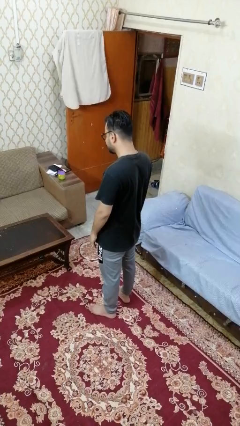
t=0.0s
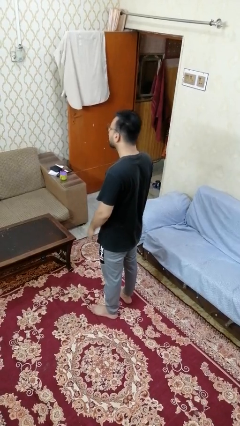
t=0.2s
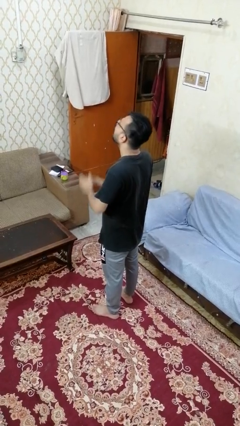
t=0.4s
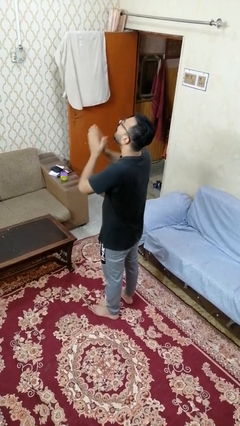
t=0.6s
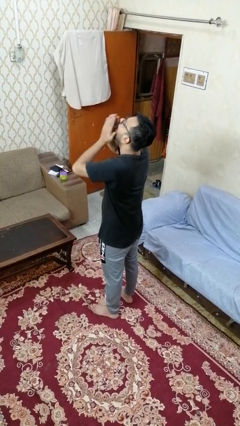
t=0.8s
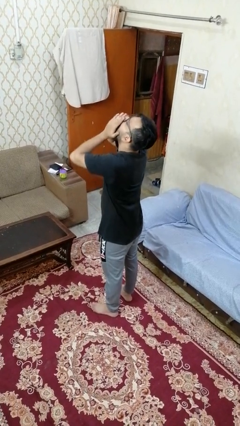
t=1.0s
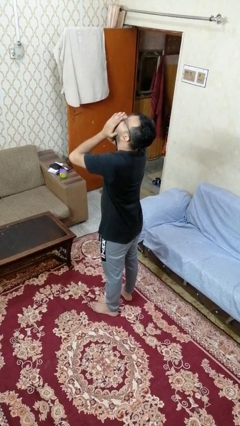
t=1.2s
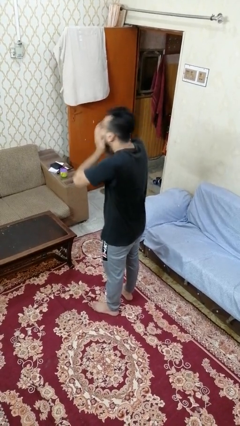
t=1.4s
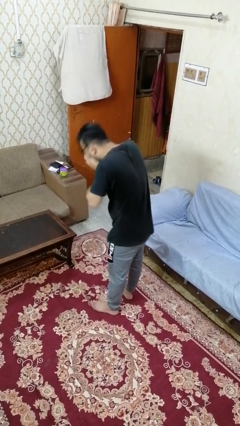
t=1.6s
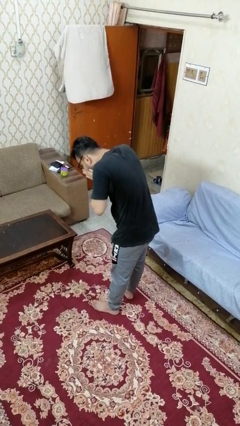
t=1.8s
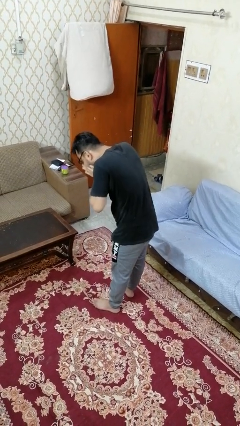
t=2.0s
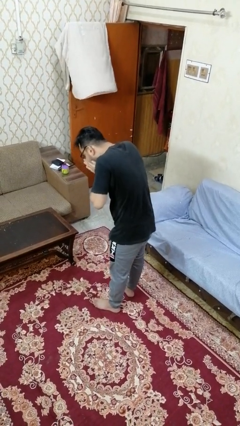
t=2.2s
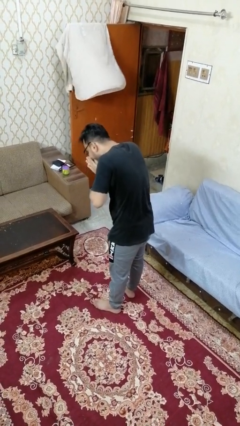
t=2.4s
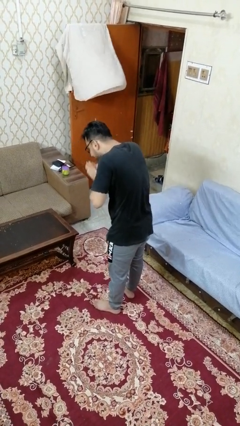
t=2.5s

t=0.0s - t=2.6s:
person sneezes into hand

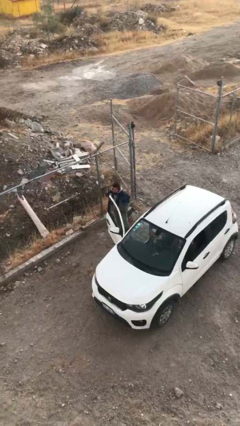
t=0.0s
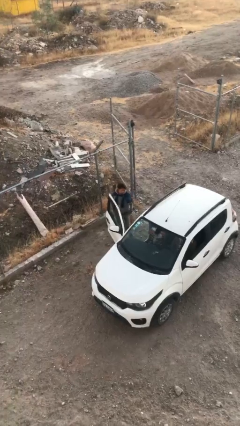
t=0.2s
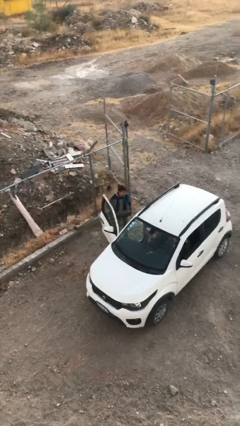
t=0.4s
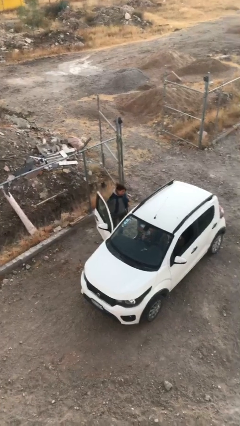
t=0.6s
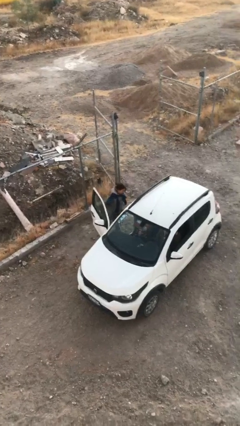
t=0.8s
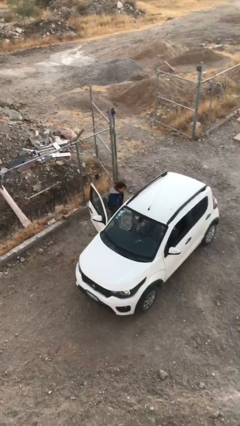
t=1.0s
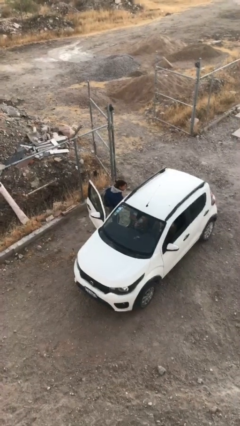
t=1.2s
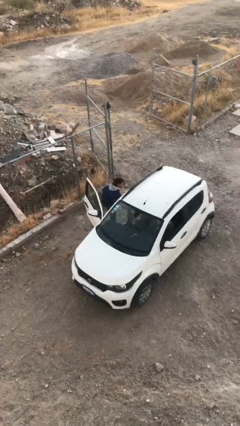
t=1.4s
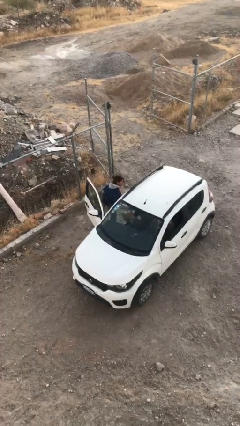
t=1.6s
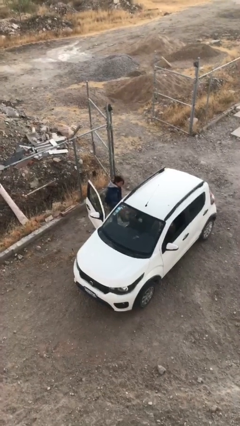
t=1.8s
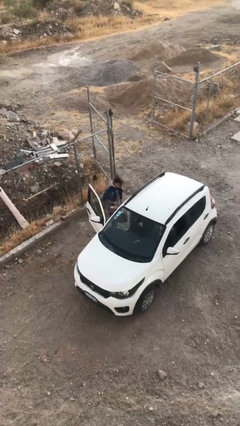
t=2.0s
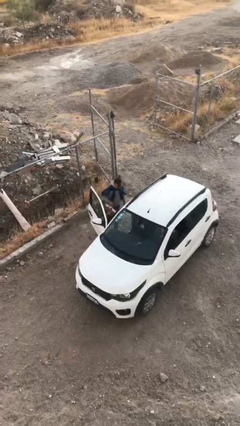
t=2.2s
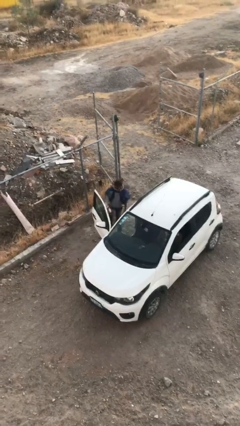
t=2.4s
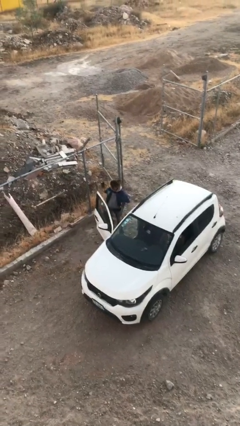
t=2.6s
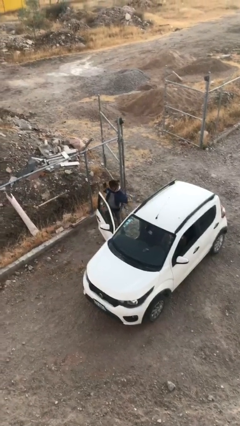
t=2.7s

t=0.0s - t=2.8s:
person unloads car

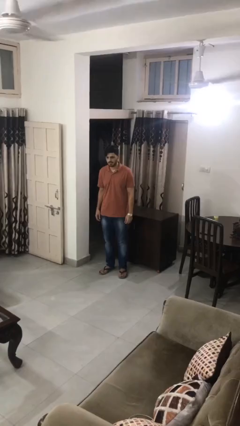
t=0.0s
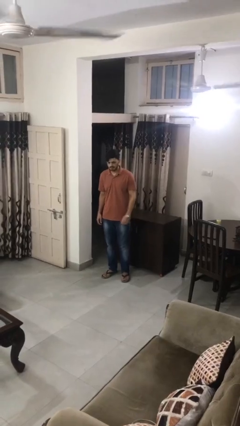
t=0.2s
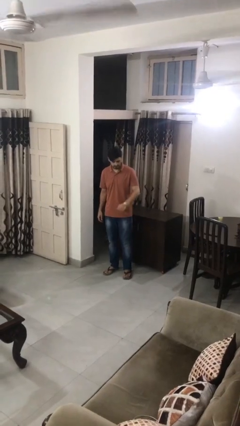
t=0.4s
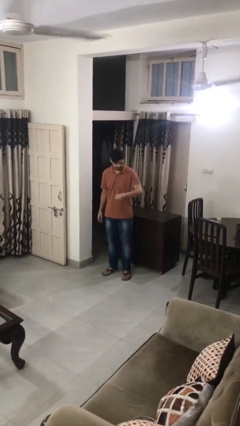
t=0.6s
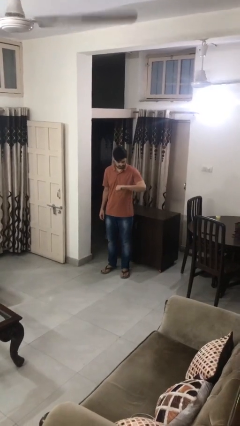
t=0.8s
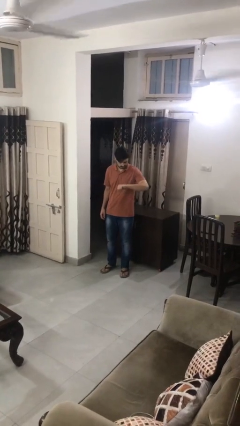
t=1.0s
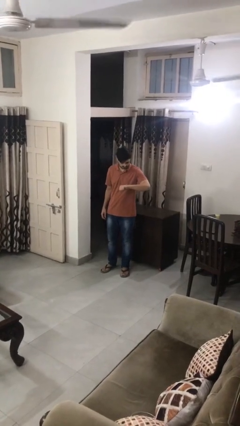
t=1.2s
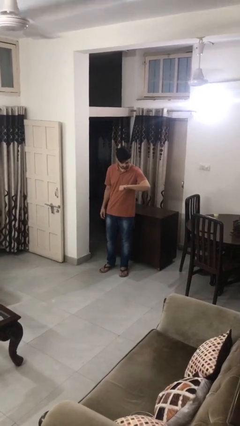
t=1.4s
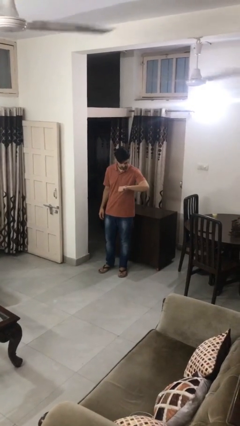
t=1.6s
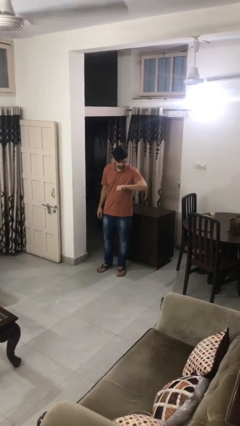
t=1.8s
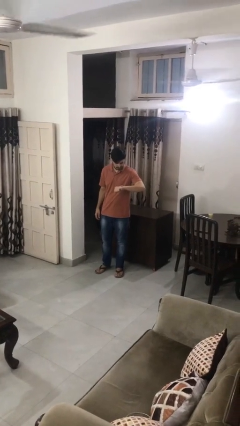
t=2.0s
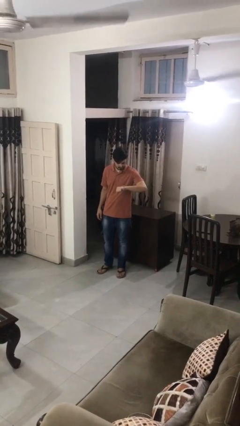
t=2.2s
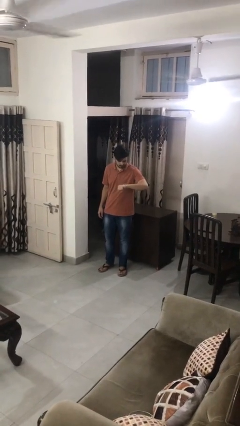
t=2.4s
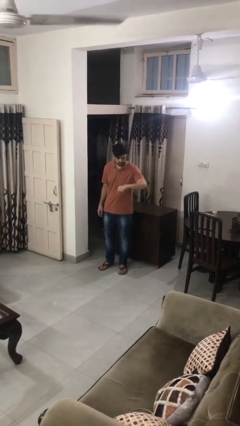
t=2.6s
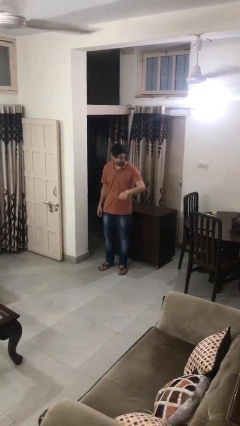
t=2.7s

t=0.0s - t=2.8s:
person looks at wristwatch

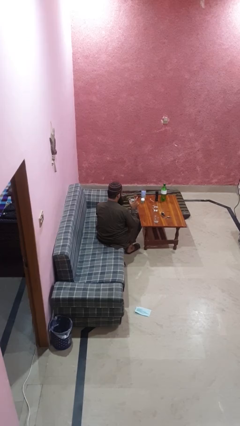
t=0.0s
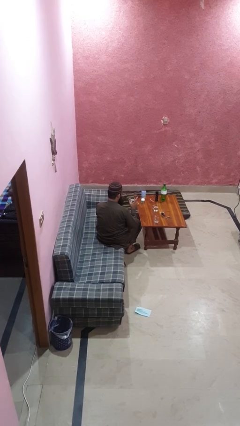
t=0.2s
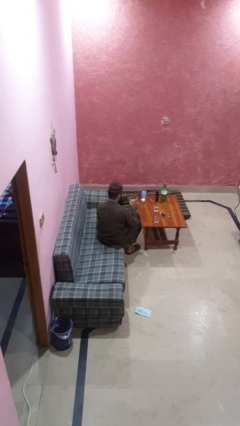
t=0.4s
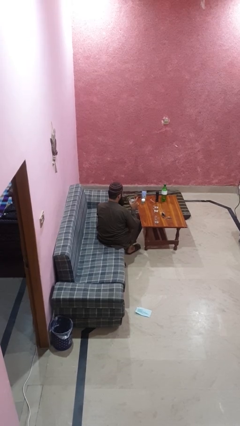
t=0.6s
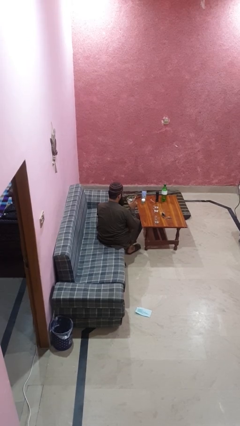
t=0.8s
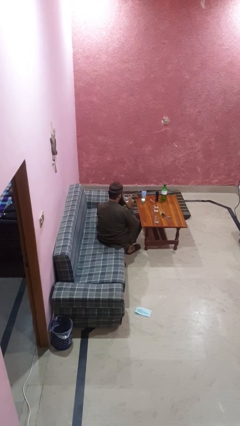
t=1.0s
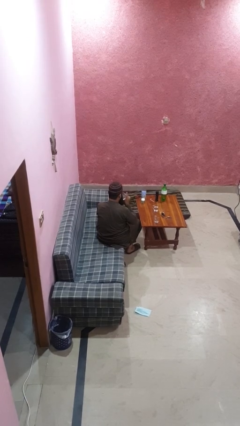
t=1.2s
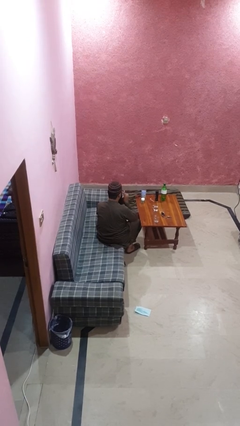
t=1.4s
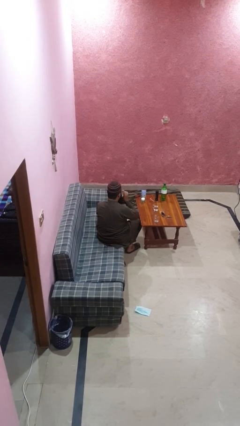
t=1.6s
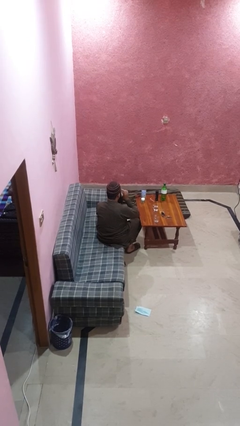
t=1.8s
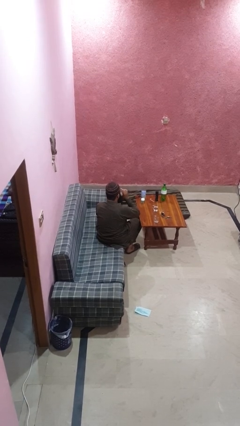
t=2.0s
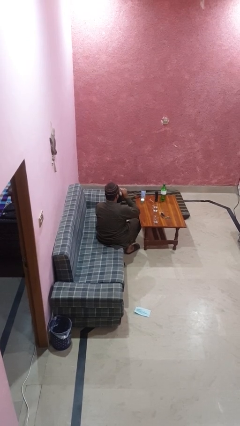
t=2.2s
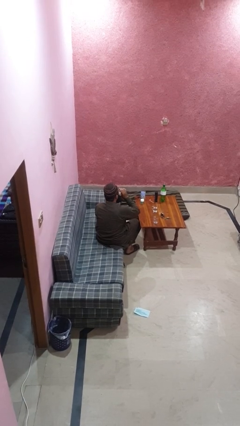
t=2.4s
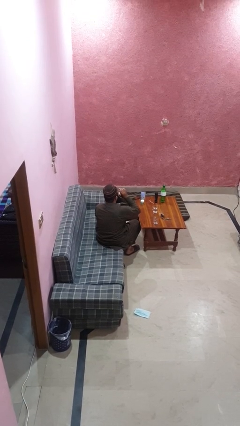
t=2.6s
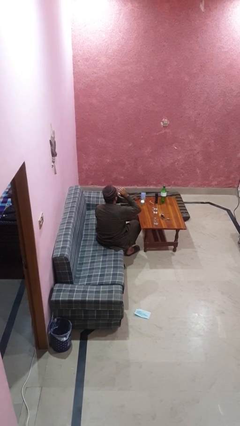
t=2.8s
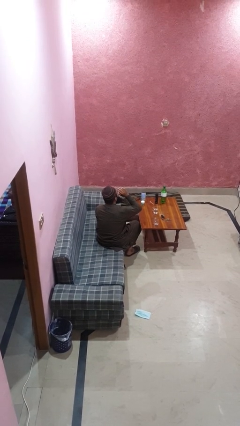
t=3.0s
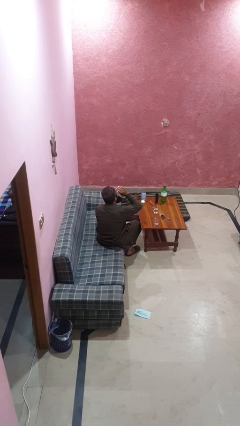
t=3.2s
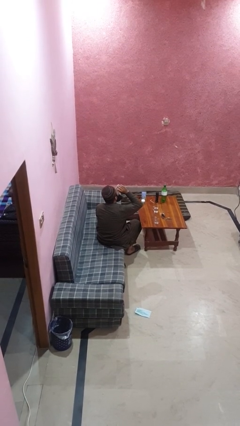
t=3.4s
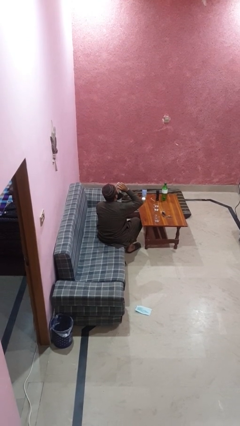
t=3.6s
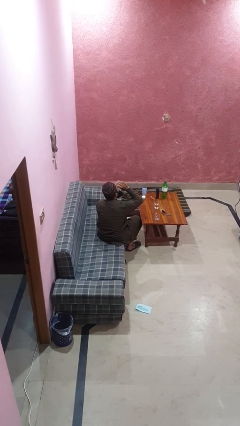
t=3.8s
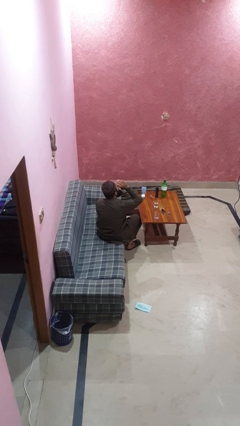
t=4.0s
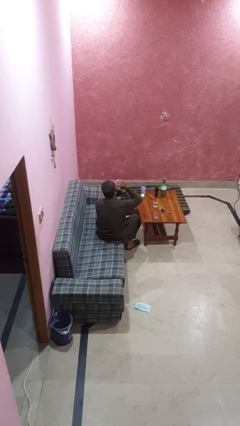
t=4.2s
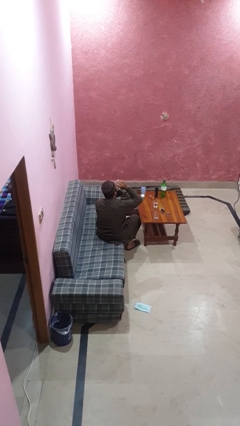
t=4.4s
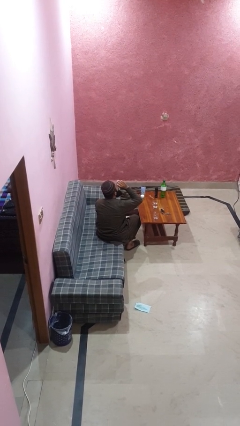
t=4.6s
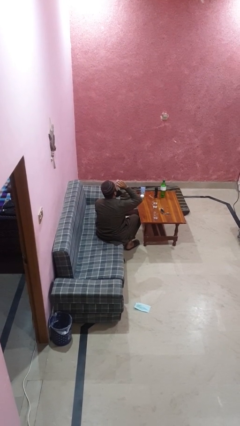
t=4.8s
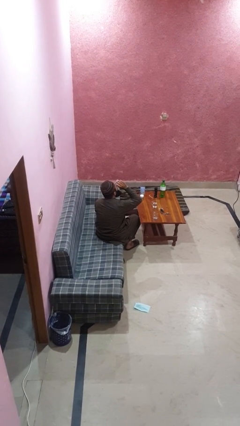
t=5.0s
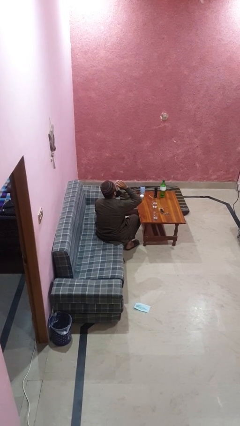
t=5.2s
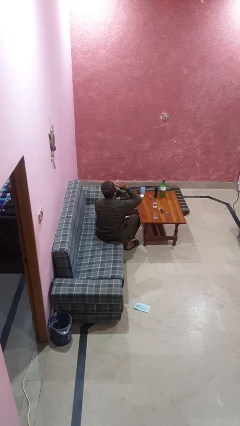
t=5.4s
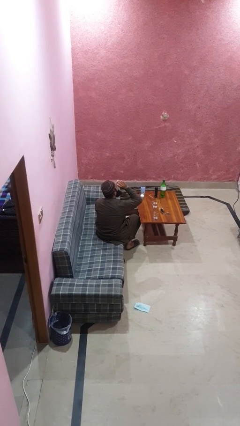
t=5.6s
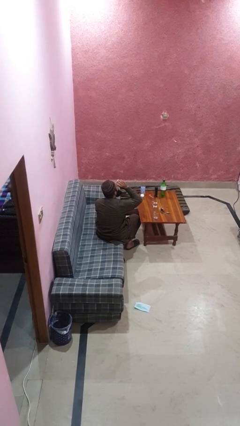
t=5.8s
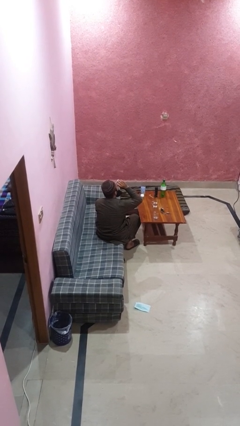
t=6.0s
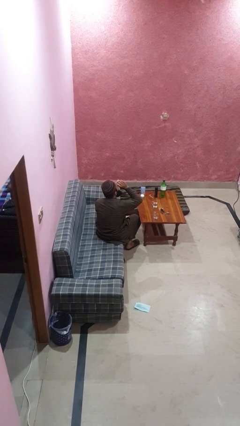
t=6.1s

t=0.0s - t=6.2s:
person drinks from shotglass

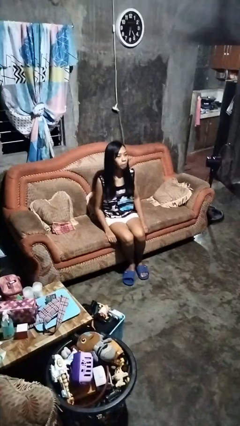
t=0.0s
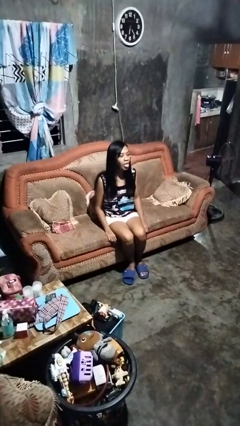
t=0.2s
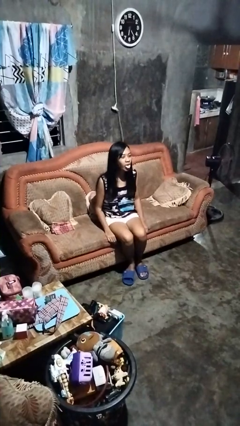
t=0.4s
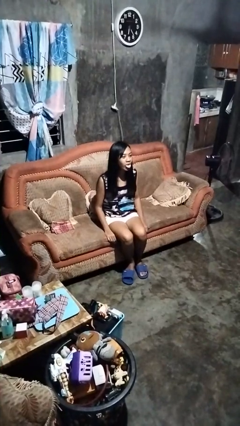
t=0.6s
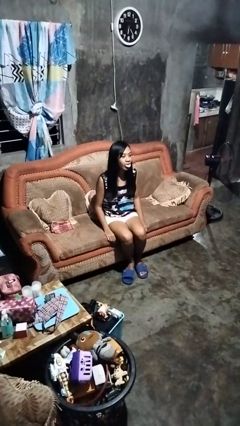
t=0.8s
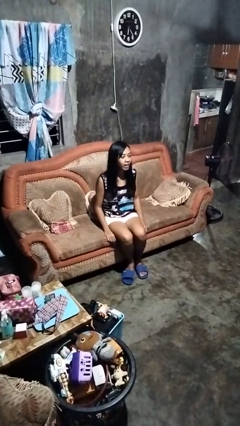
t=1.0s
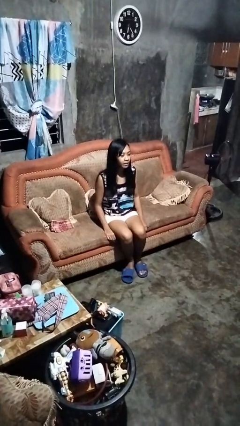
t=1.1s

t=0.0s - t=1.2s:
person sticks out tongue

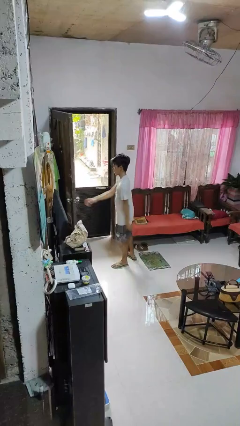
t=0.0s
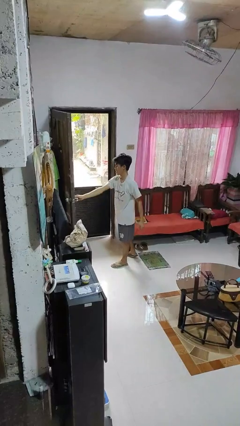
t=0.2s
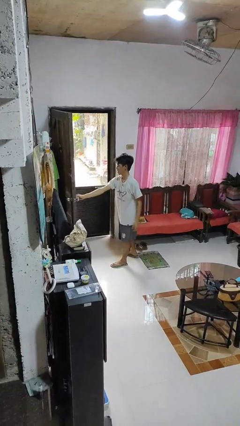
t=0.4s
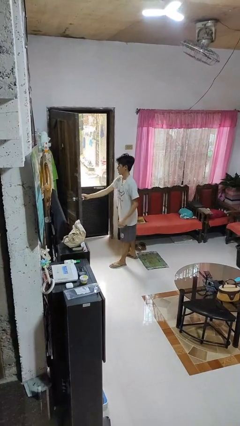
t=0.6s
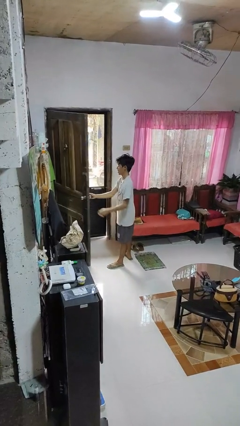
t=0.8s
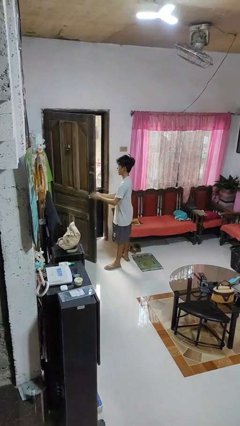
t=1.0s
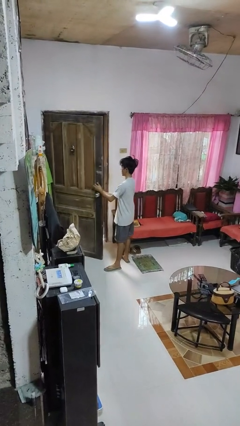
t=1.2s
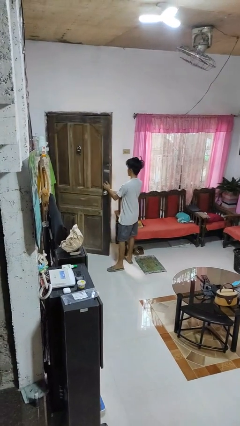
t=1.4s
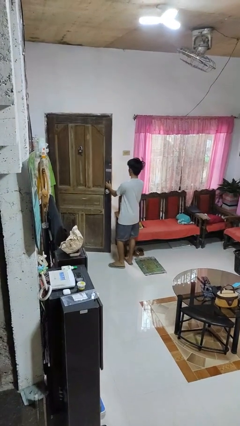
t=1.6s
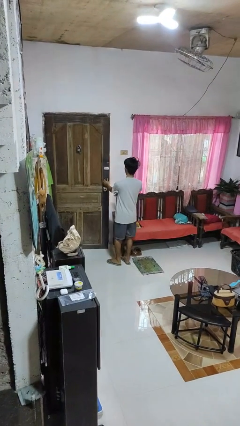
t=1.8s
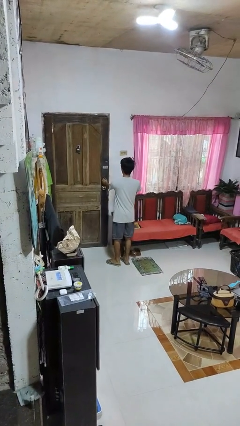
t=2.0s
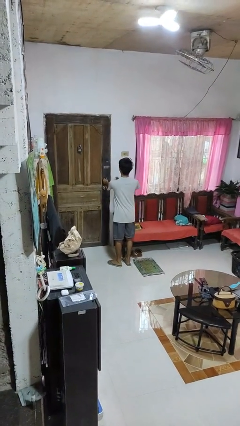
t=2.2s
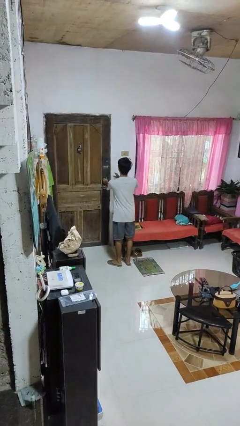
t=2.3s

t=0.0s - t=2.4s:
person closes facility door
